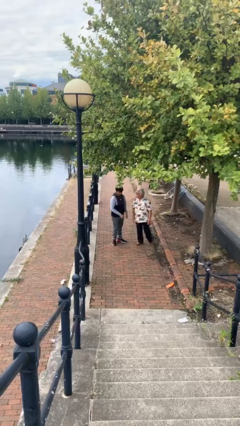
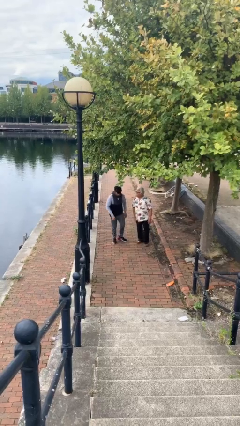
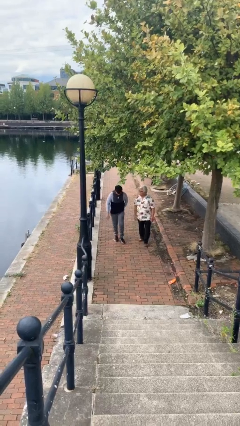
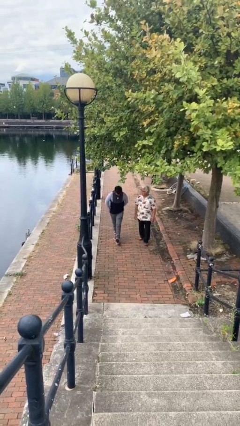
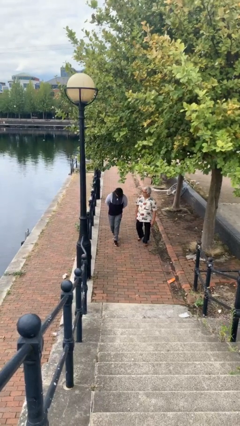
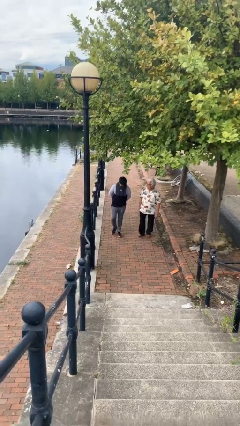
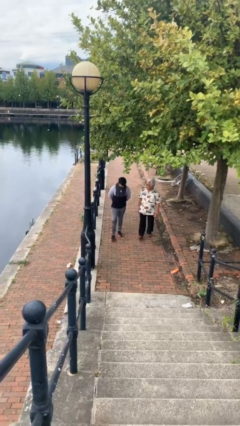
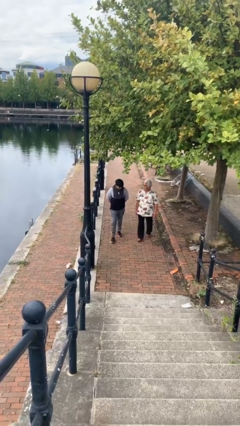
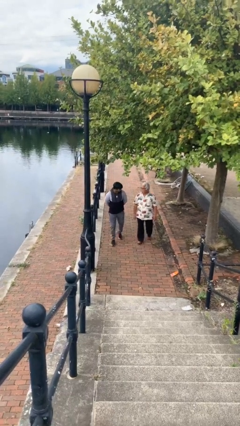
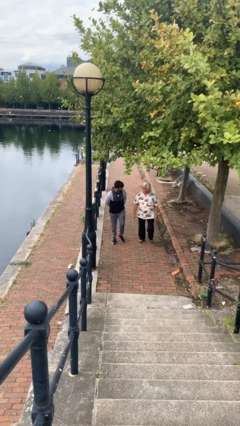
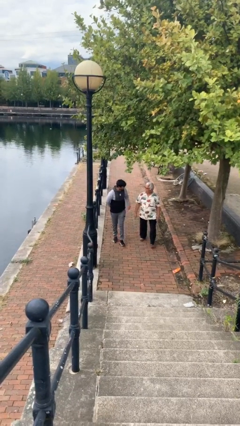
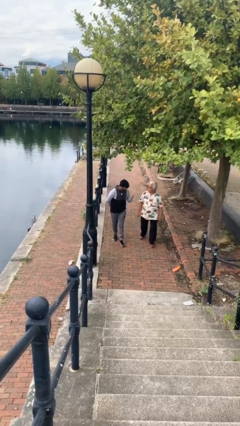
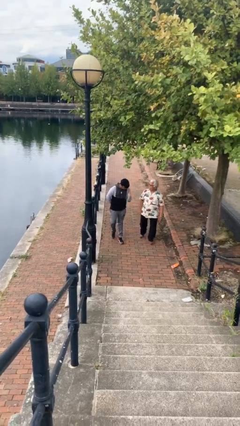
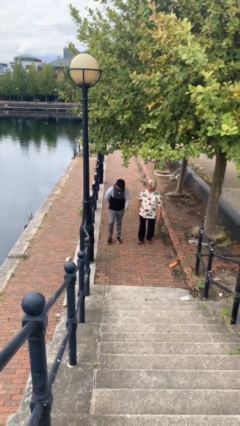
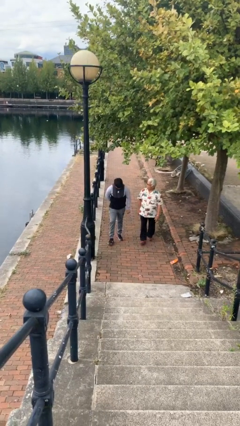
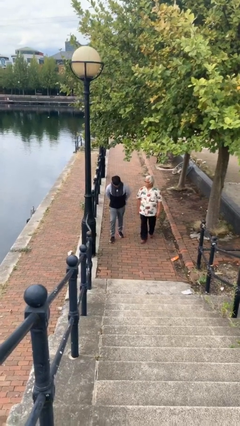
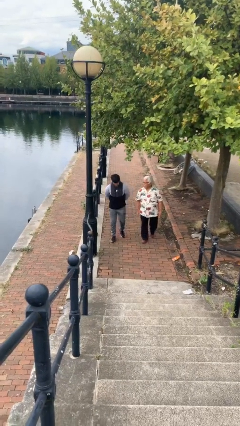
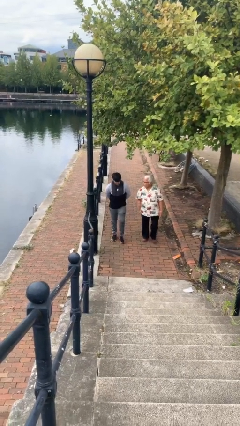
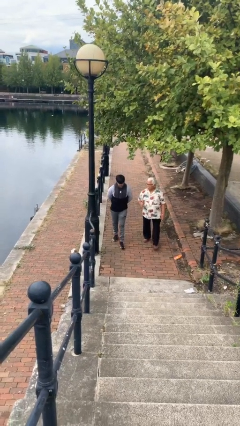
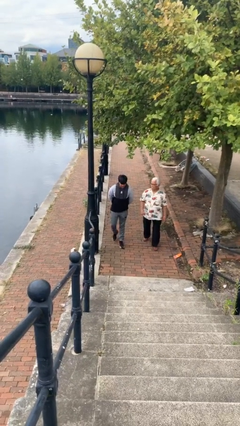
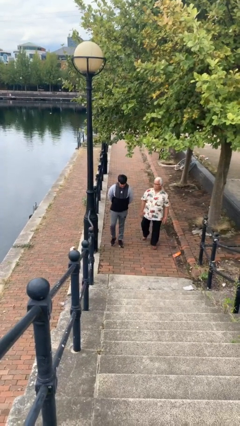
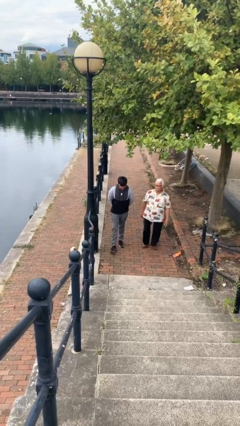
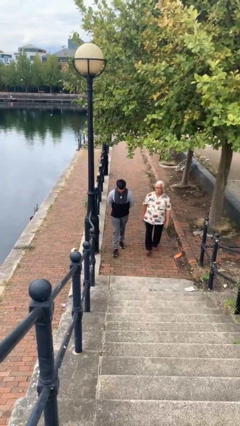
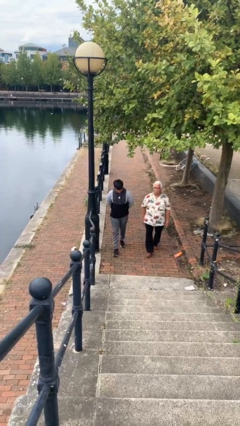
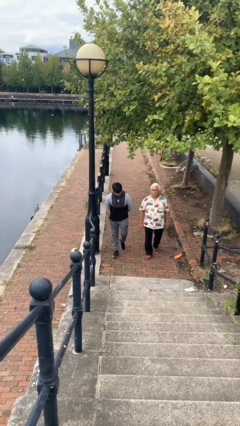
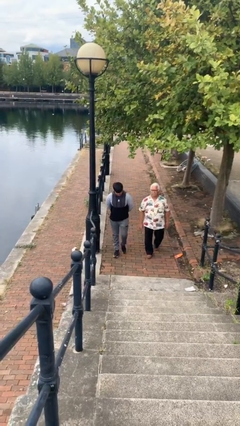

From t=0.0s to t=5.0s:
person talks to person

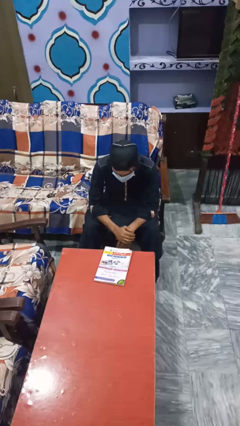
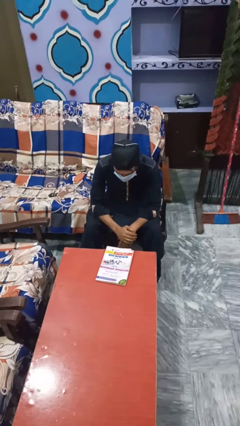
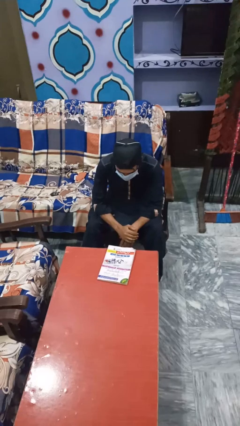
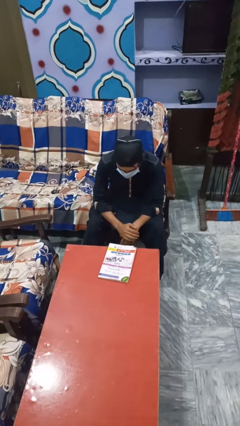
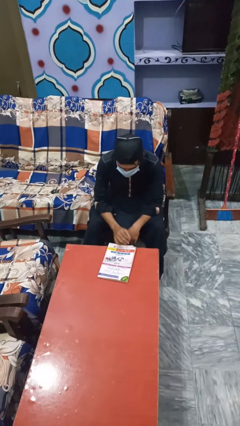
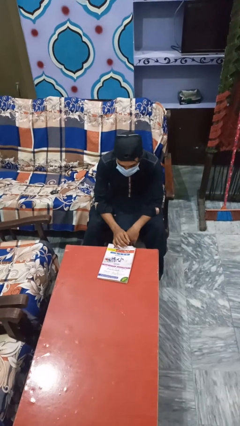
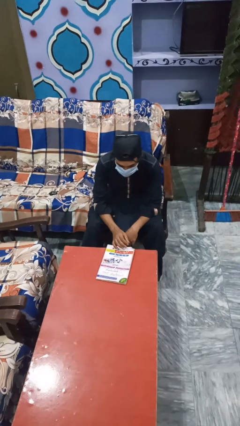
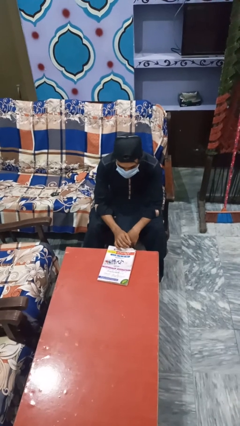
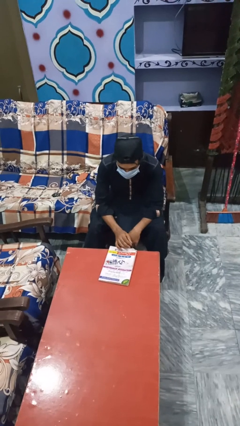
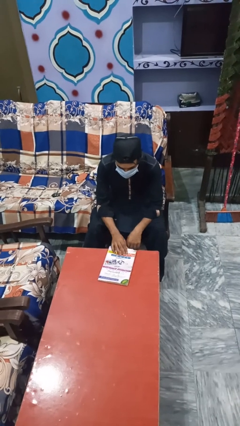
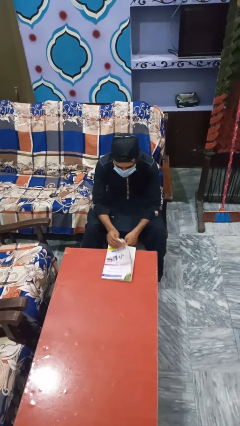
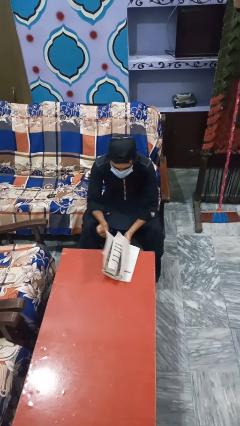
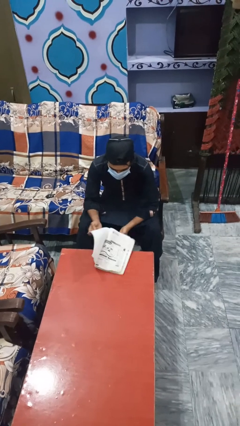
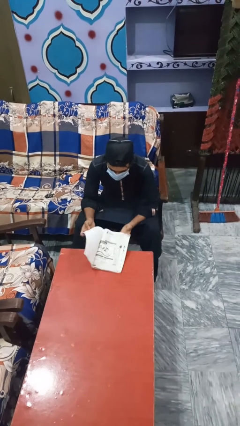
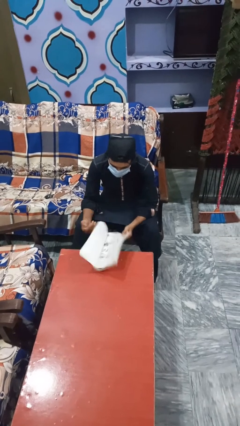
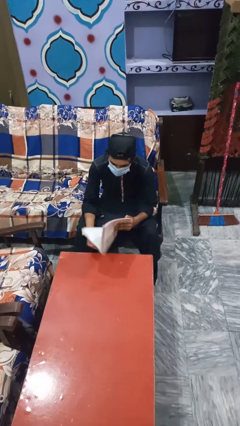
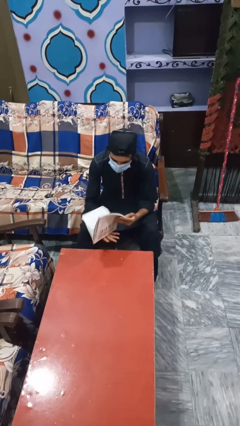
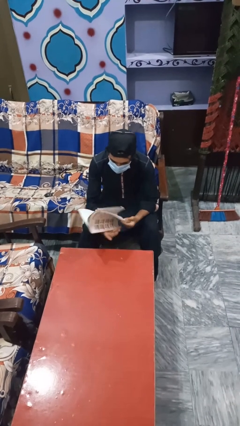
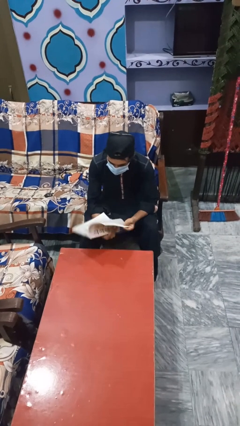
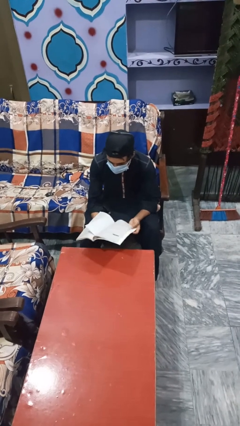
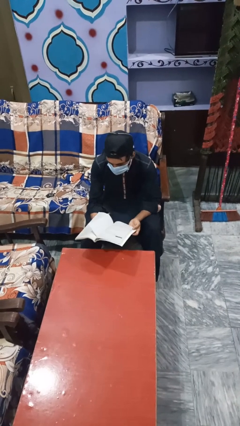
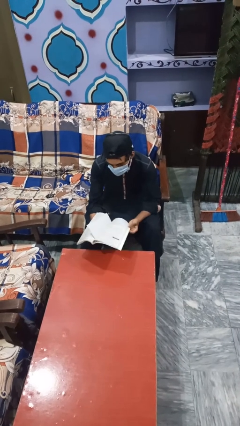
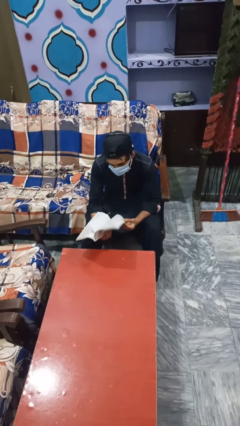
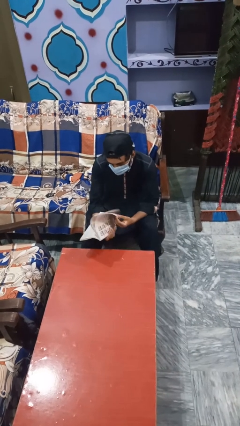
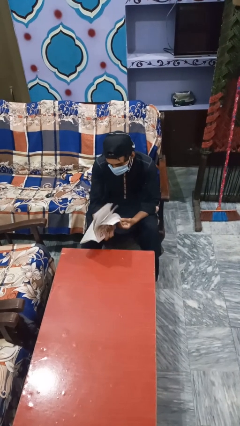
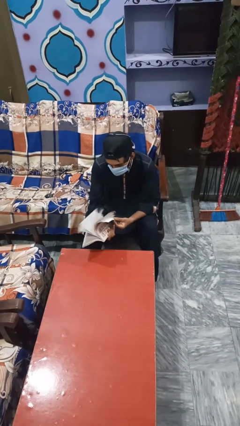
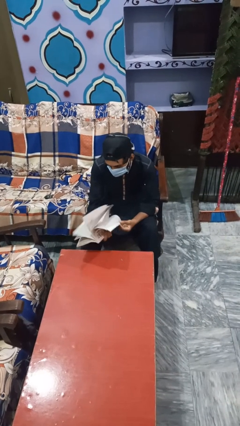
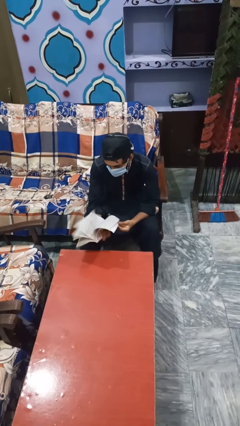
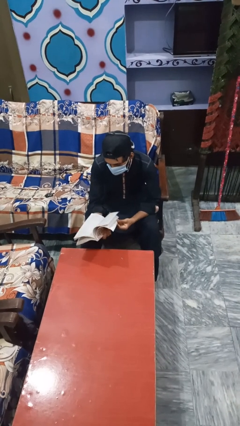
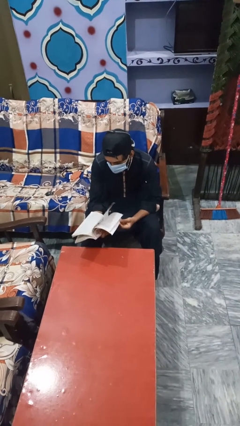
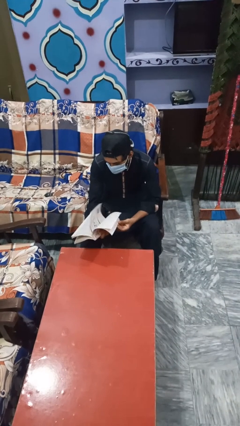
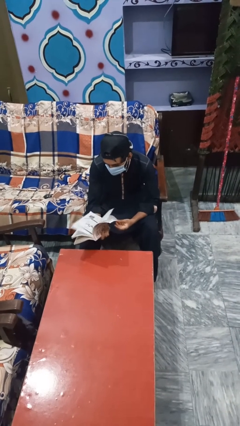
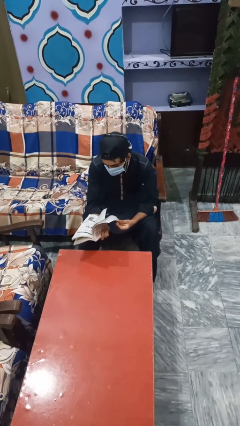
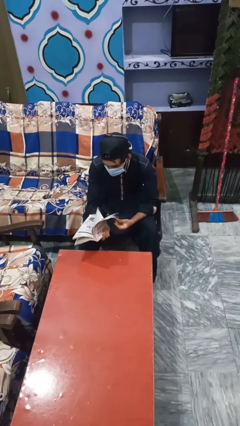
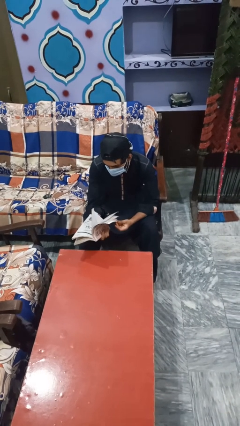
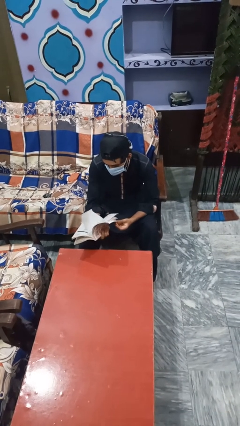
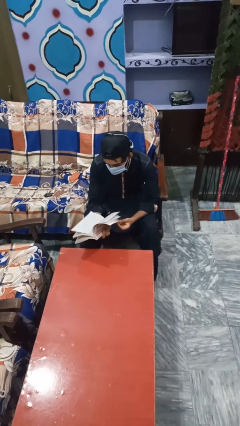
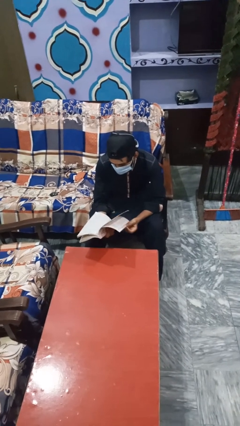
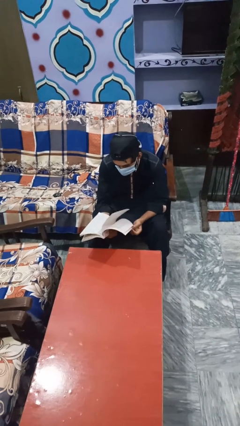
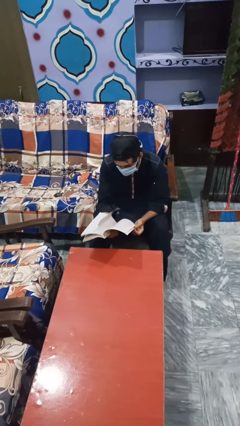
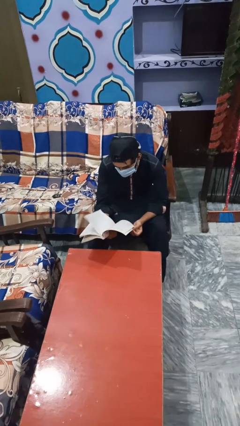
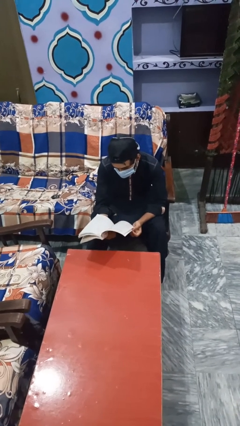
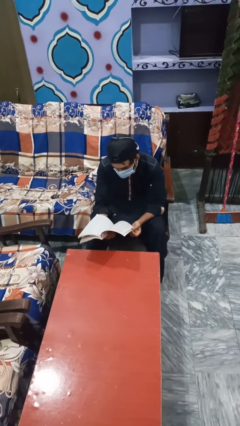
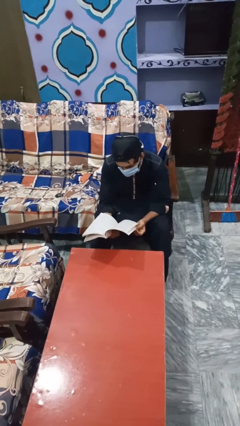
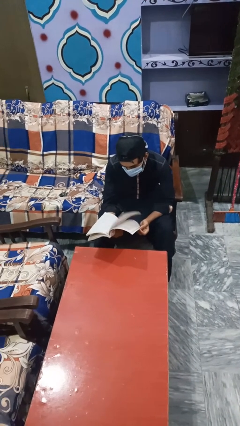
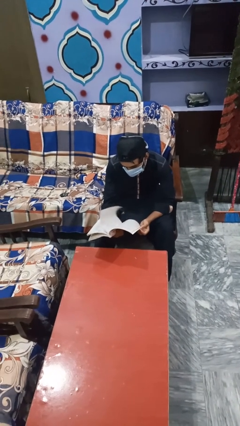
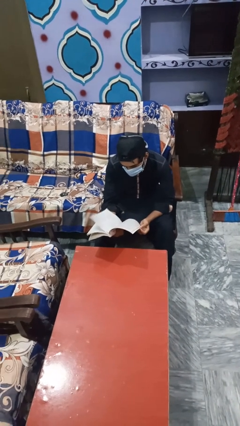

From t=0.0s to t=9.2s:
person reads book

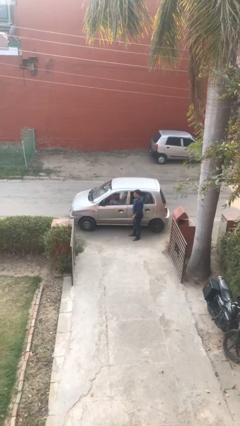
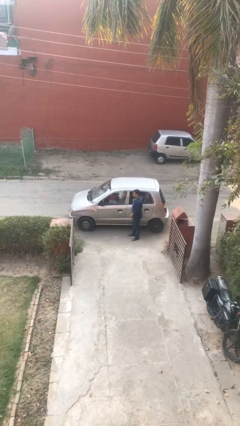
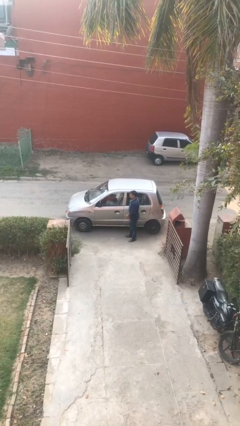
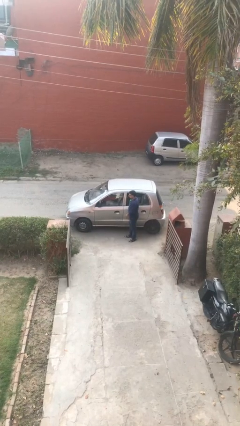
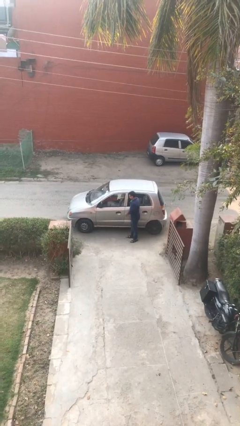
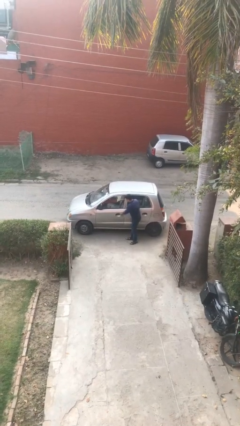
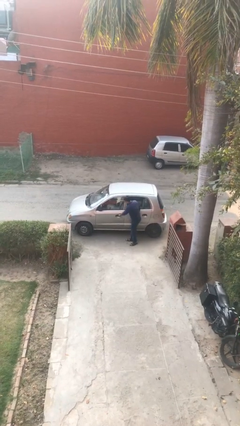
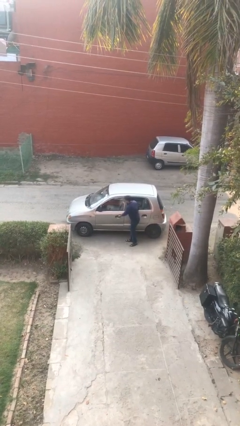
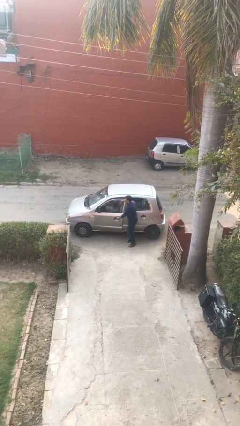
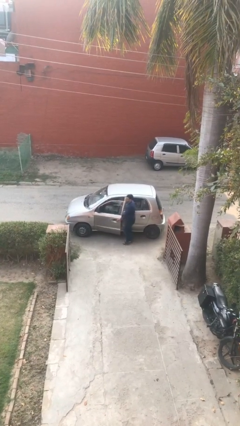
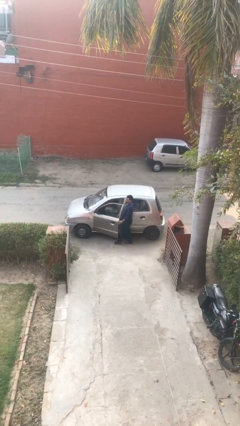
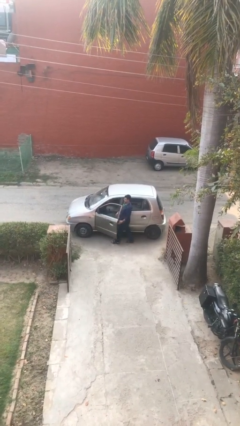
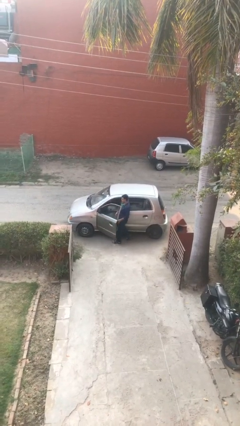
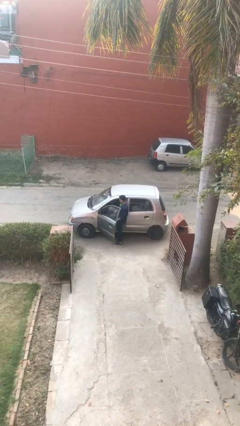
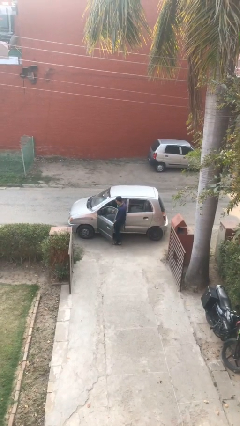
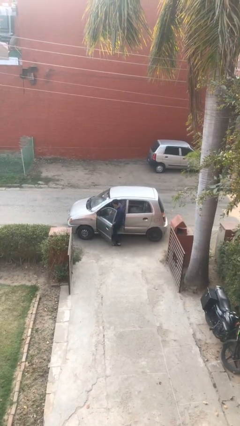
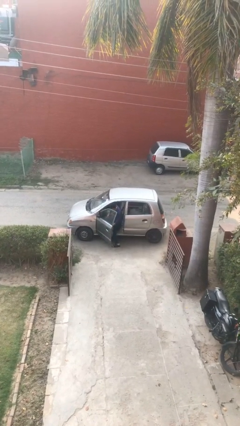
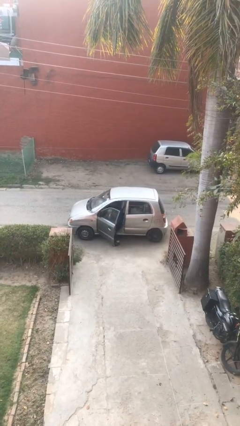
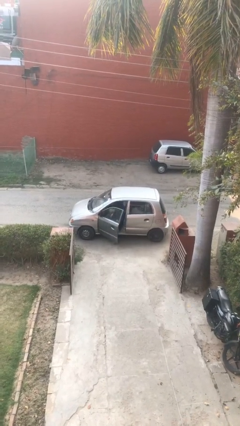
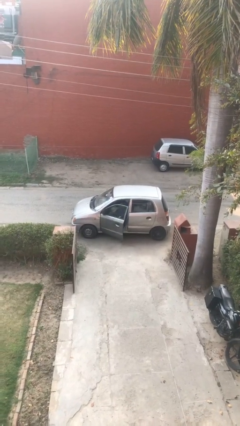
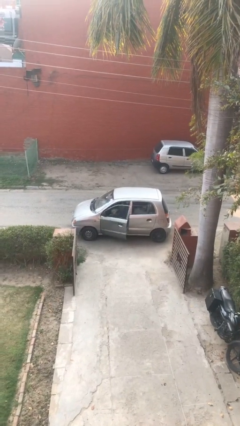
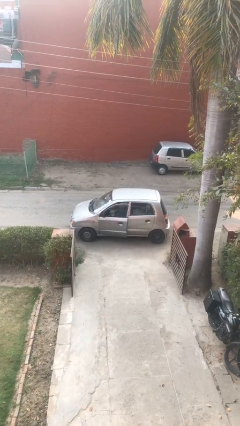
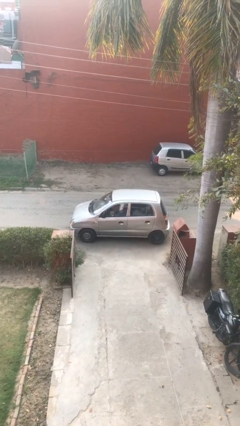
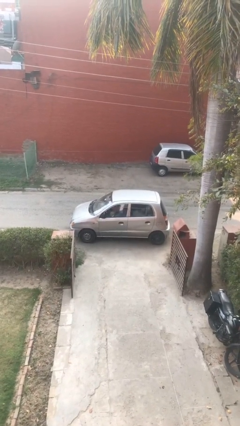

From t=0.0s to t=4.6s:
car picks up person
